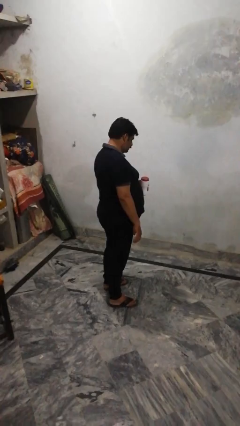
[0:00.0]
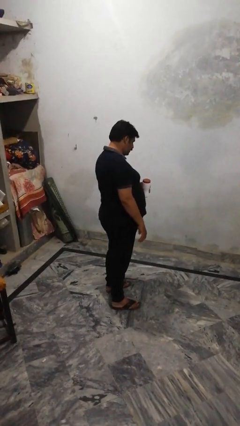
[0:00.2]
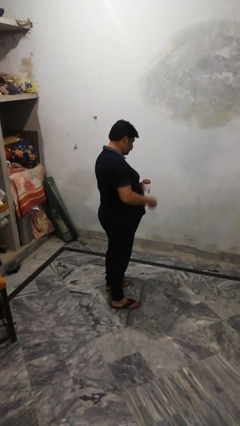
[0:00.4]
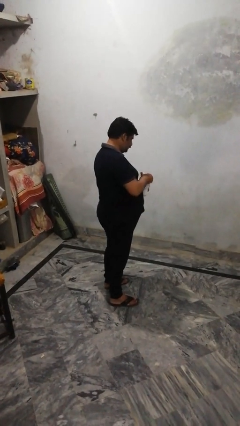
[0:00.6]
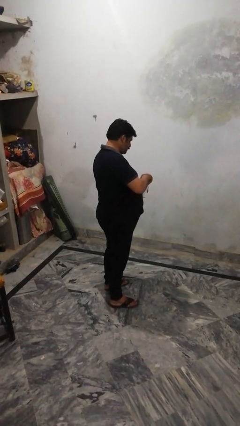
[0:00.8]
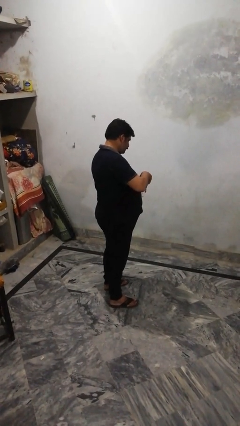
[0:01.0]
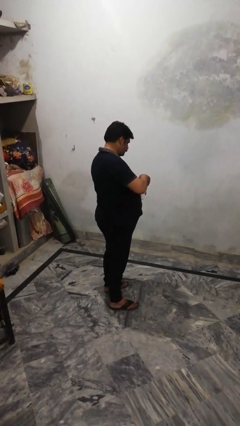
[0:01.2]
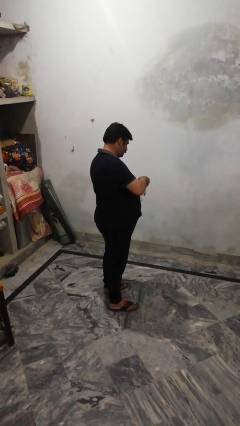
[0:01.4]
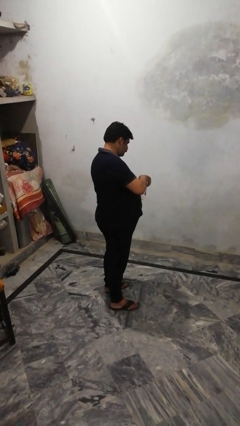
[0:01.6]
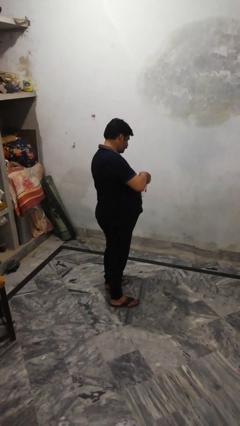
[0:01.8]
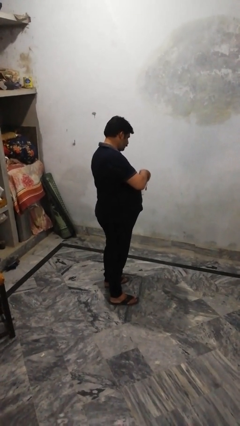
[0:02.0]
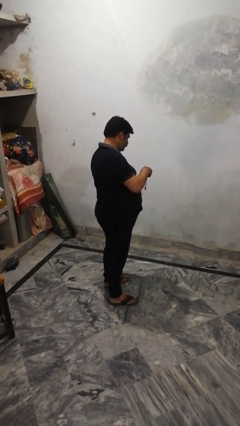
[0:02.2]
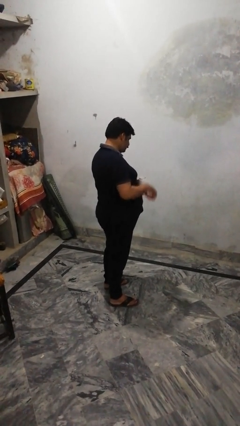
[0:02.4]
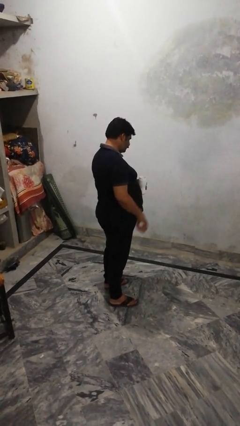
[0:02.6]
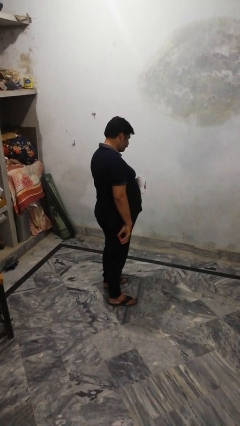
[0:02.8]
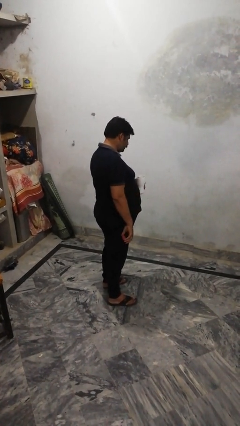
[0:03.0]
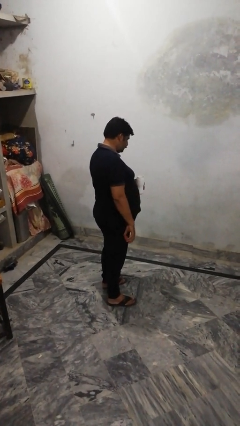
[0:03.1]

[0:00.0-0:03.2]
person opens jar

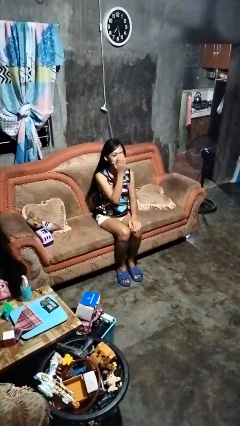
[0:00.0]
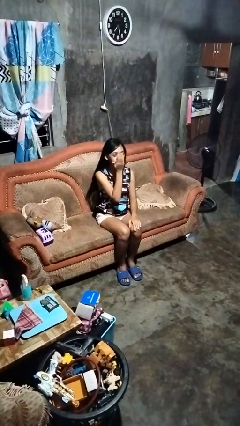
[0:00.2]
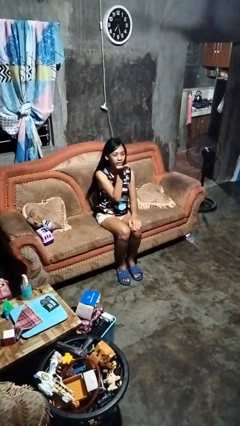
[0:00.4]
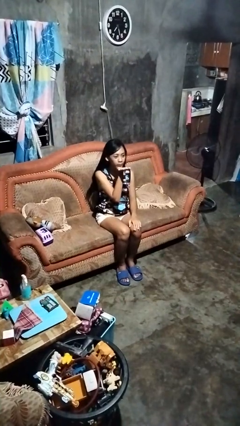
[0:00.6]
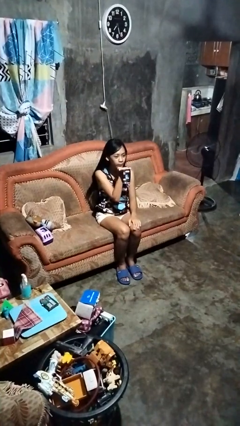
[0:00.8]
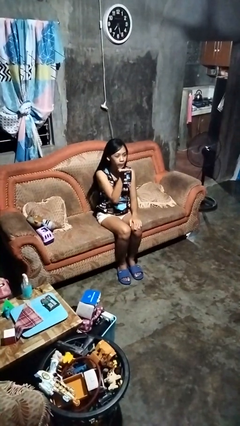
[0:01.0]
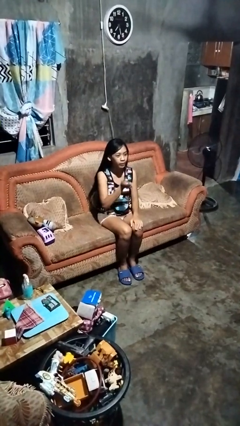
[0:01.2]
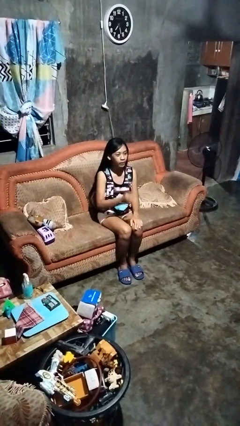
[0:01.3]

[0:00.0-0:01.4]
person gestures blow kiss

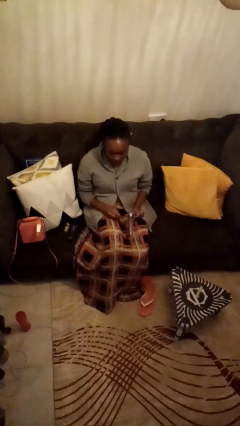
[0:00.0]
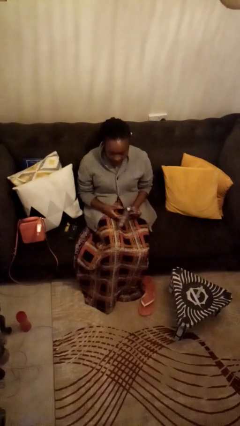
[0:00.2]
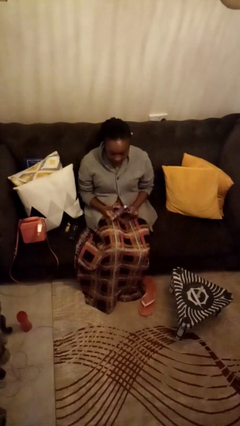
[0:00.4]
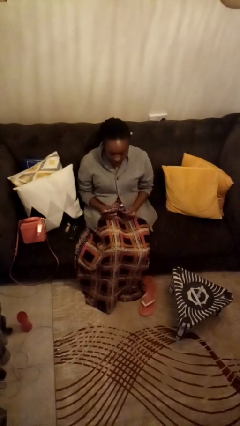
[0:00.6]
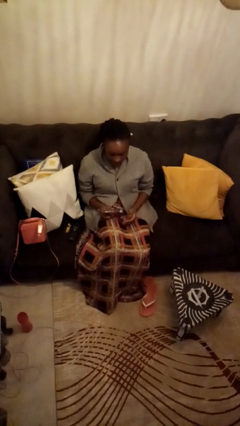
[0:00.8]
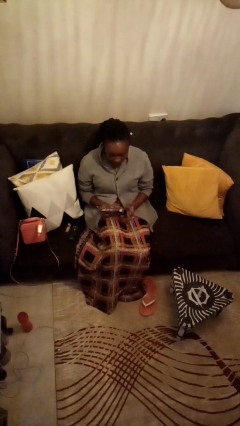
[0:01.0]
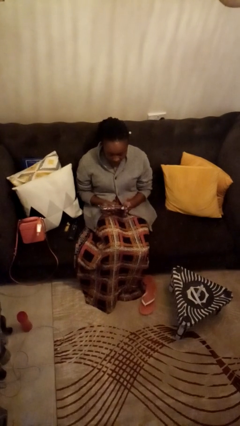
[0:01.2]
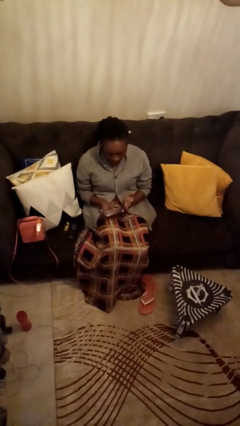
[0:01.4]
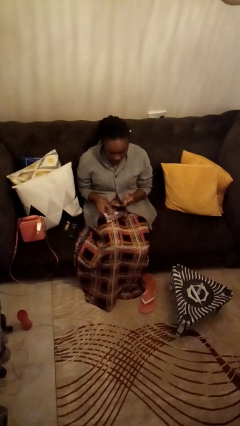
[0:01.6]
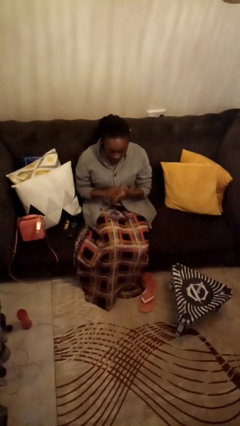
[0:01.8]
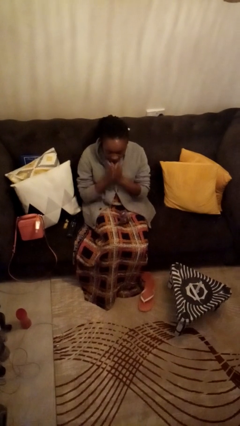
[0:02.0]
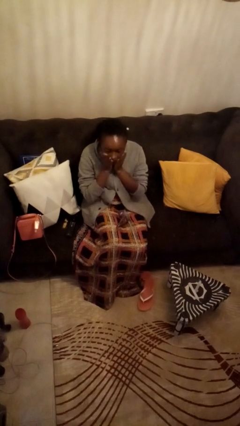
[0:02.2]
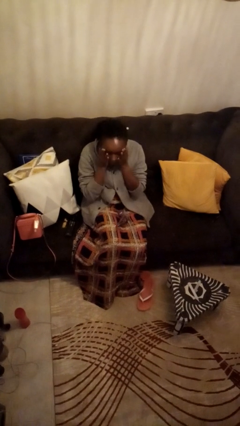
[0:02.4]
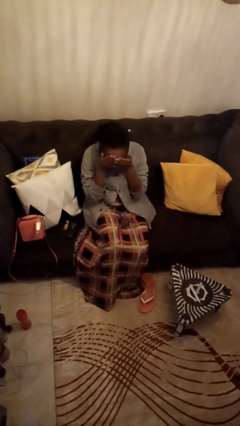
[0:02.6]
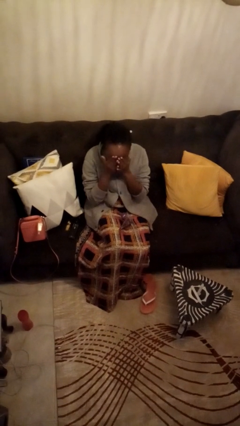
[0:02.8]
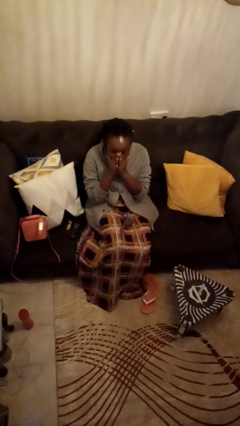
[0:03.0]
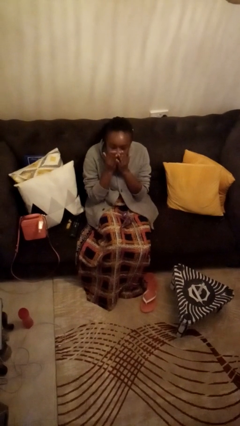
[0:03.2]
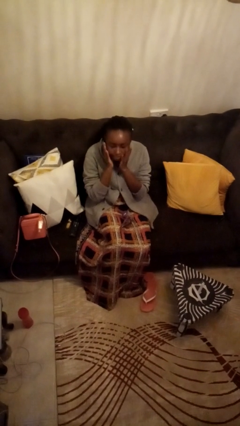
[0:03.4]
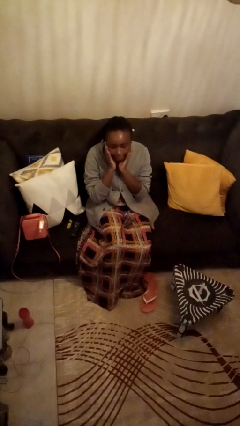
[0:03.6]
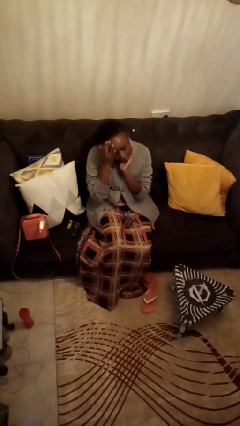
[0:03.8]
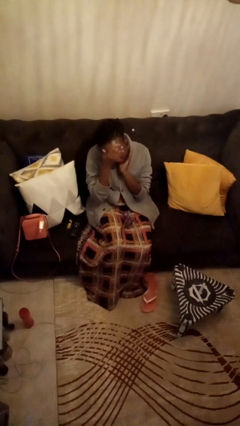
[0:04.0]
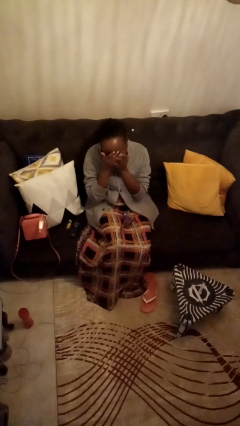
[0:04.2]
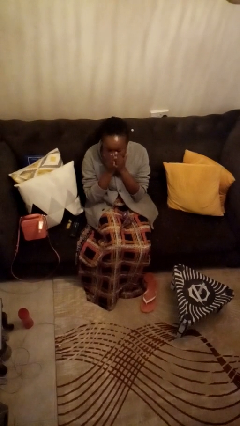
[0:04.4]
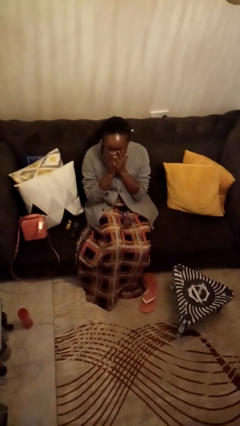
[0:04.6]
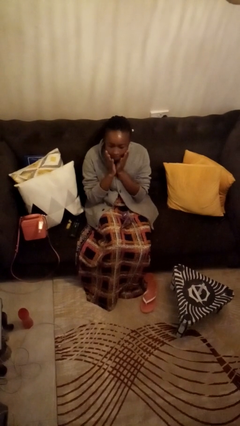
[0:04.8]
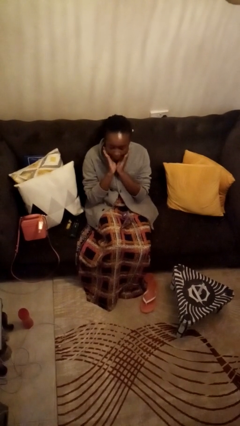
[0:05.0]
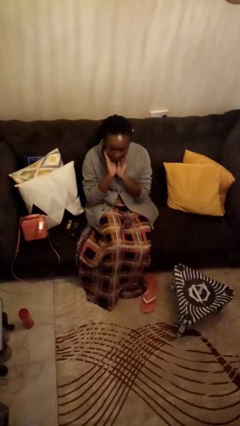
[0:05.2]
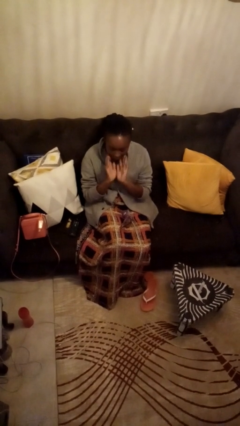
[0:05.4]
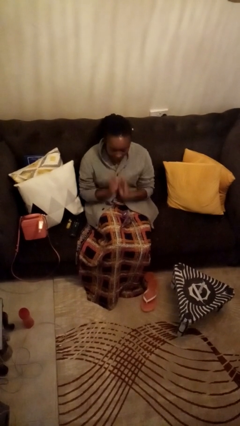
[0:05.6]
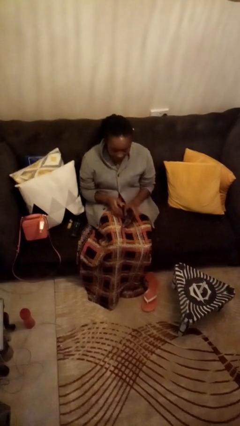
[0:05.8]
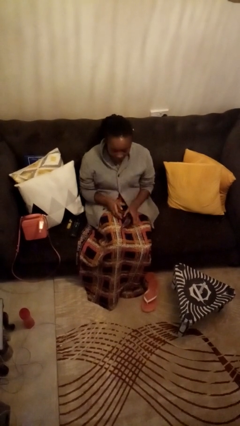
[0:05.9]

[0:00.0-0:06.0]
person applies facial moisturizer

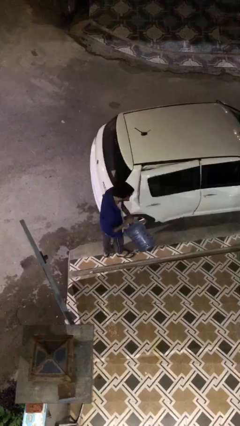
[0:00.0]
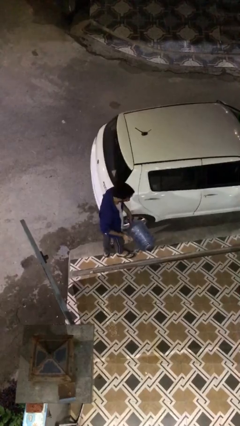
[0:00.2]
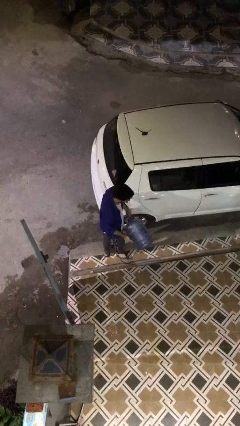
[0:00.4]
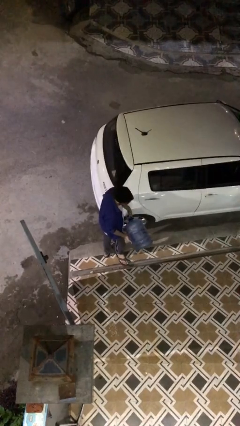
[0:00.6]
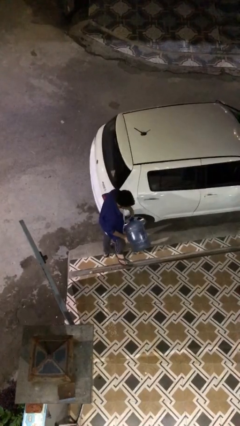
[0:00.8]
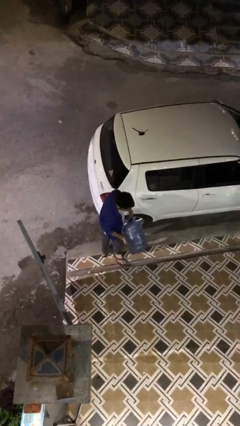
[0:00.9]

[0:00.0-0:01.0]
person closes car door

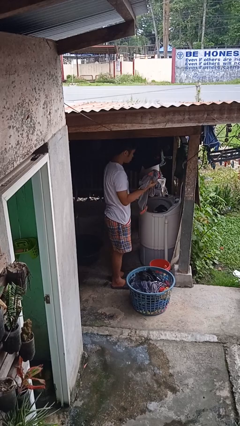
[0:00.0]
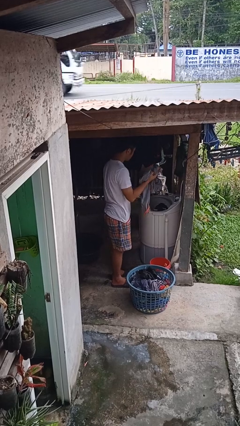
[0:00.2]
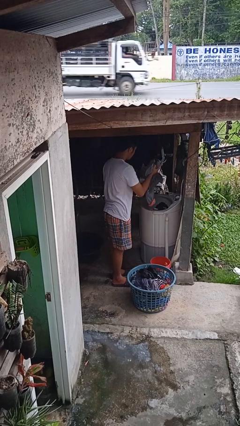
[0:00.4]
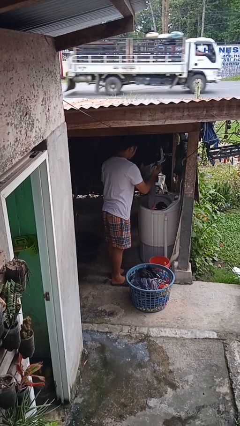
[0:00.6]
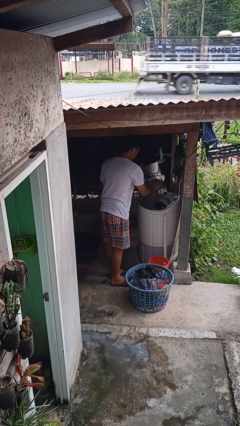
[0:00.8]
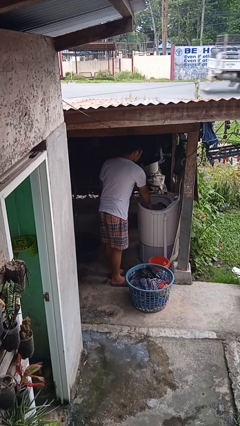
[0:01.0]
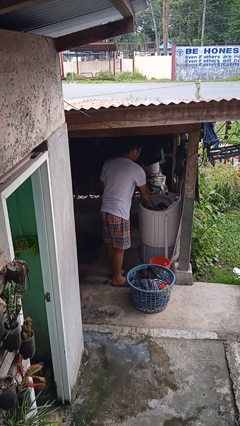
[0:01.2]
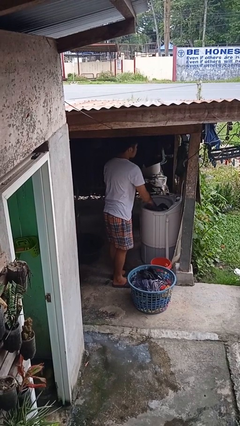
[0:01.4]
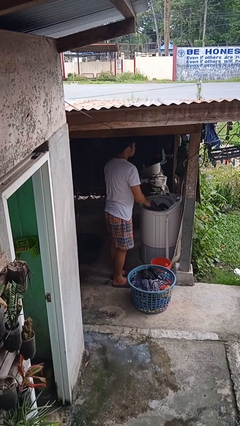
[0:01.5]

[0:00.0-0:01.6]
person loads clotheswasher

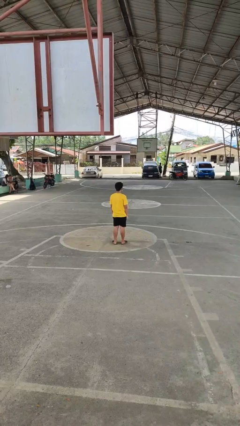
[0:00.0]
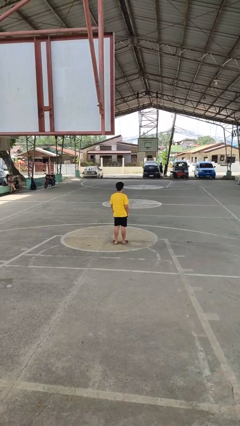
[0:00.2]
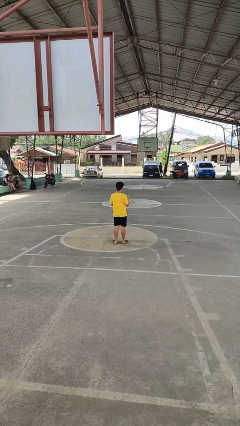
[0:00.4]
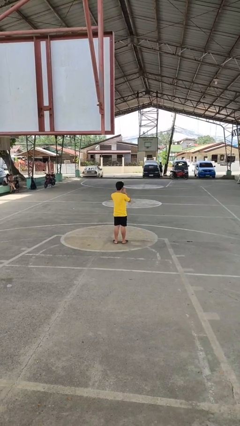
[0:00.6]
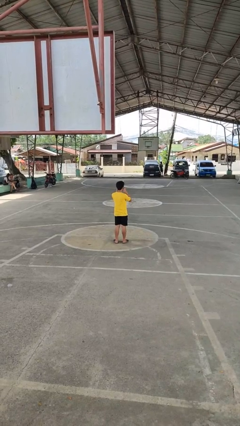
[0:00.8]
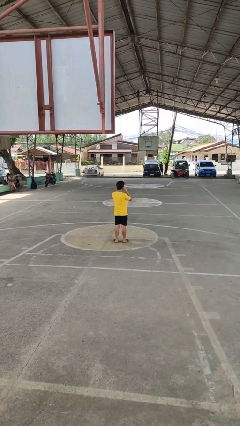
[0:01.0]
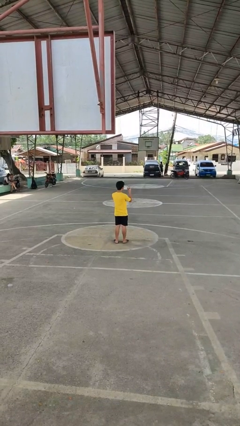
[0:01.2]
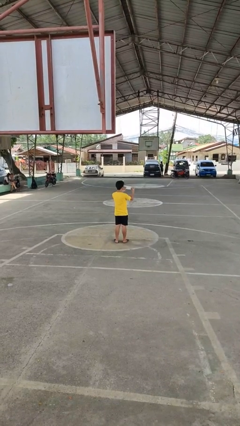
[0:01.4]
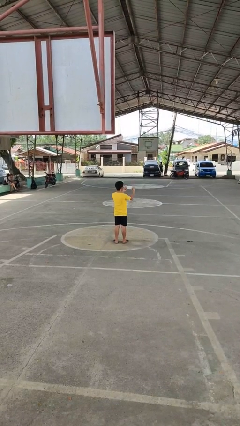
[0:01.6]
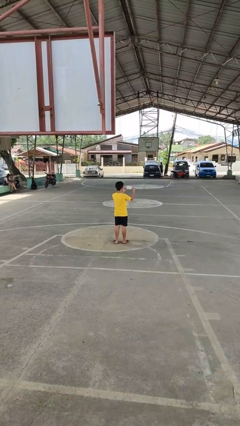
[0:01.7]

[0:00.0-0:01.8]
person takes off facemask

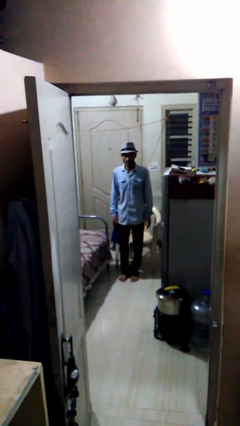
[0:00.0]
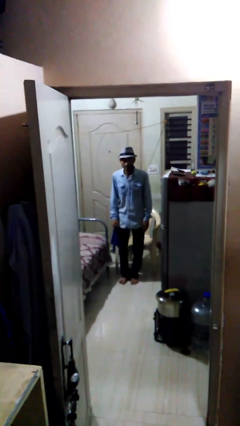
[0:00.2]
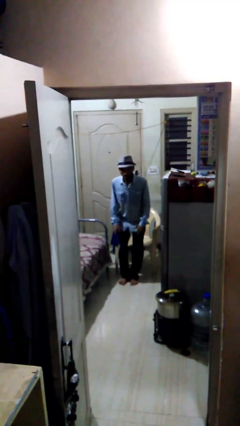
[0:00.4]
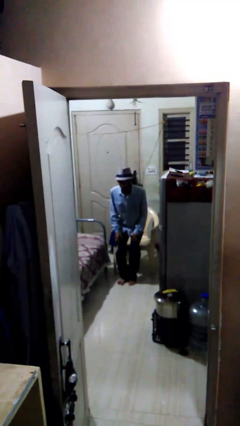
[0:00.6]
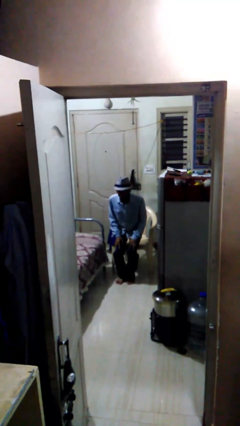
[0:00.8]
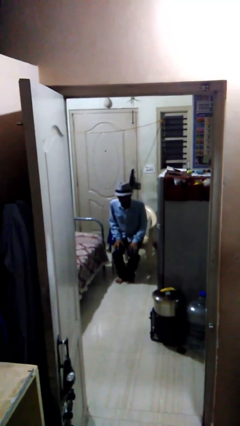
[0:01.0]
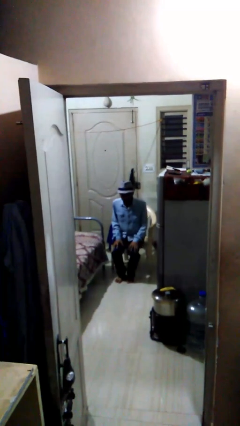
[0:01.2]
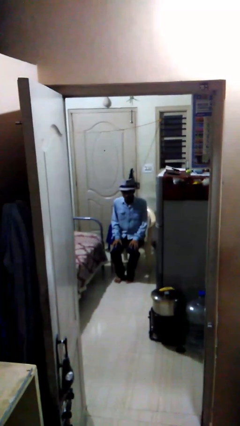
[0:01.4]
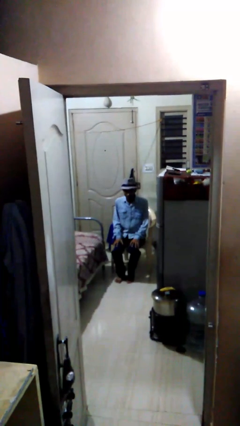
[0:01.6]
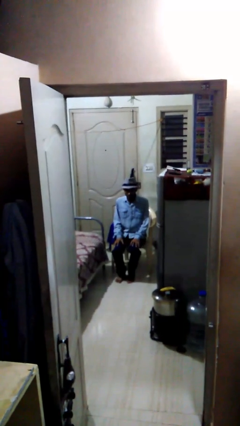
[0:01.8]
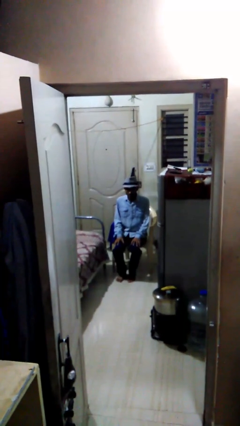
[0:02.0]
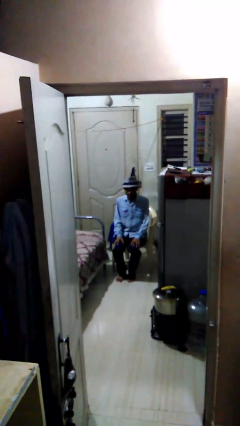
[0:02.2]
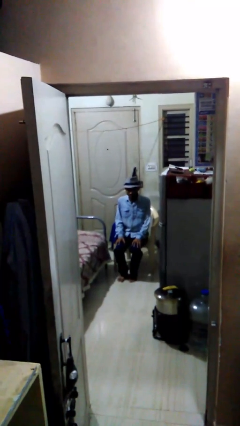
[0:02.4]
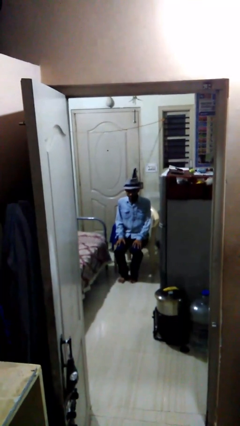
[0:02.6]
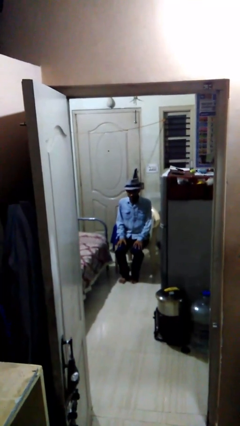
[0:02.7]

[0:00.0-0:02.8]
person sits down
